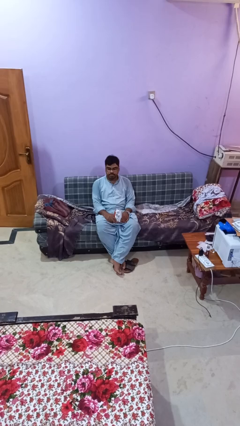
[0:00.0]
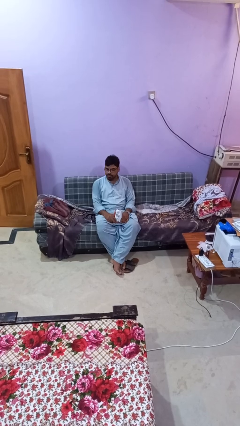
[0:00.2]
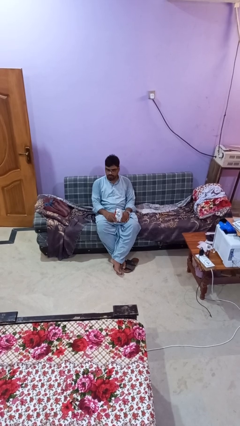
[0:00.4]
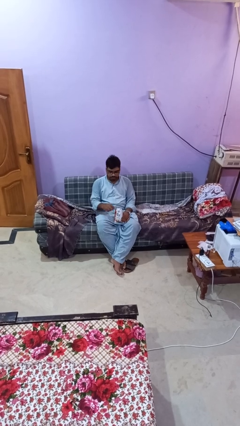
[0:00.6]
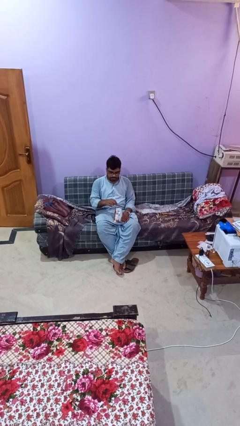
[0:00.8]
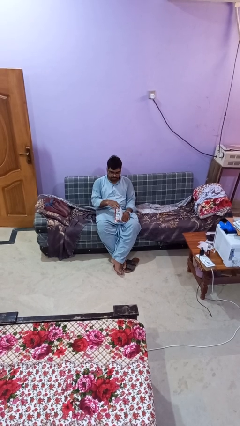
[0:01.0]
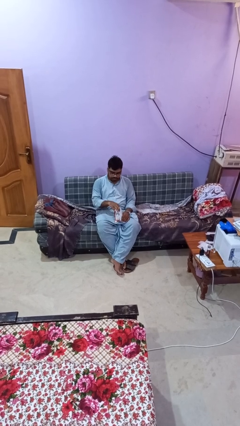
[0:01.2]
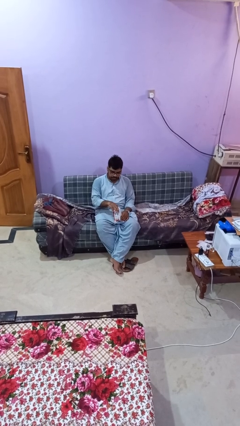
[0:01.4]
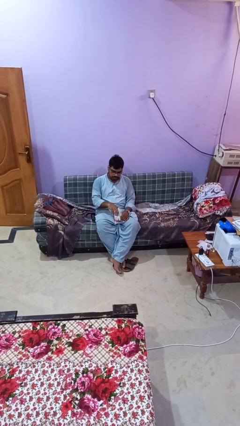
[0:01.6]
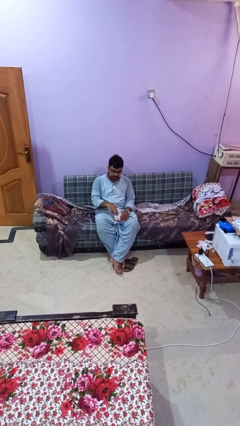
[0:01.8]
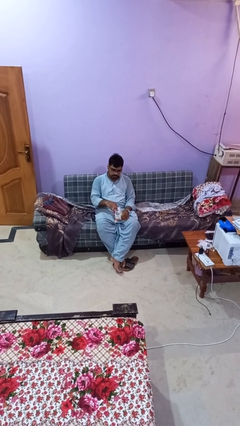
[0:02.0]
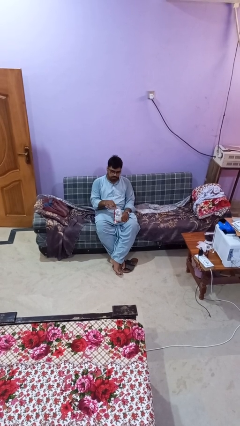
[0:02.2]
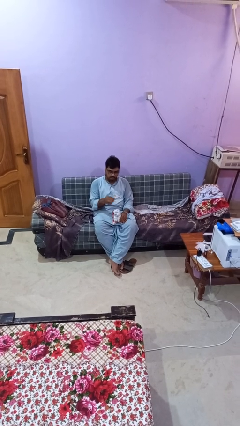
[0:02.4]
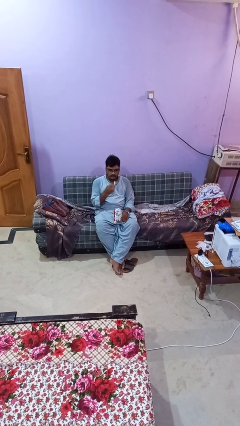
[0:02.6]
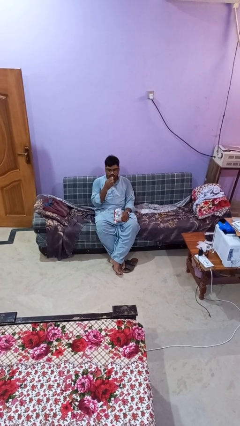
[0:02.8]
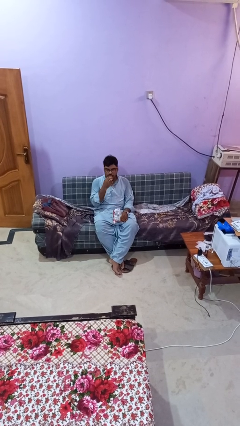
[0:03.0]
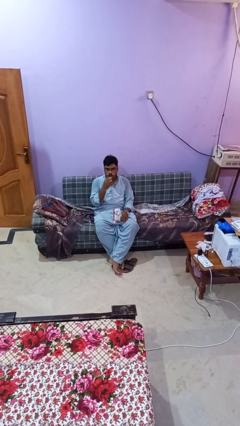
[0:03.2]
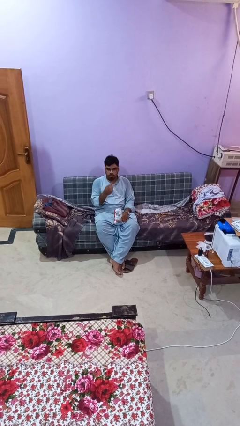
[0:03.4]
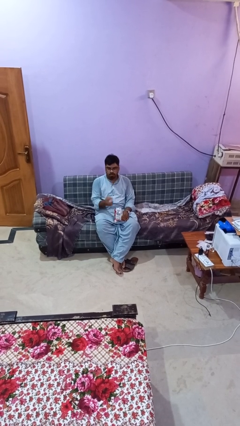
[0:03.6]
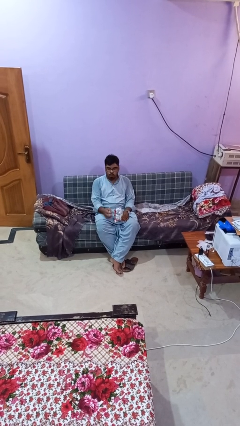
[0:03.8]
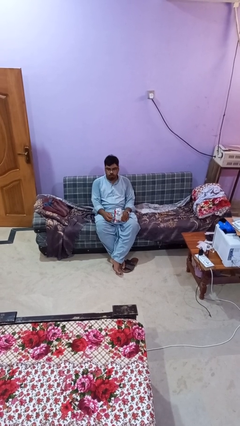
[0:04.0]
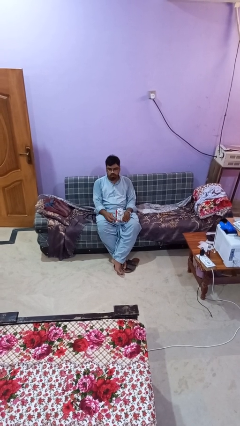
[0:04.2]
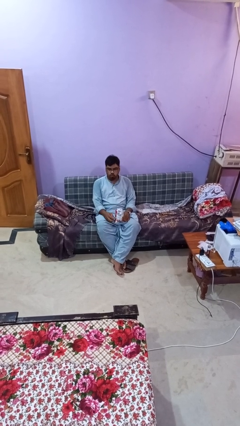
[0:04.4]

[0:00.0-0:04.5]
person eats snack from bag

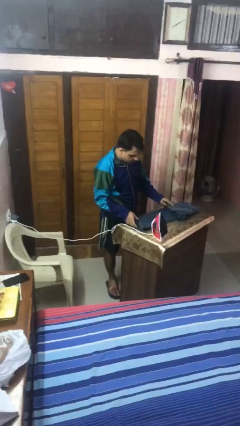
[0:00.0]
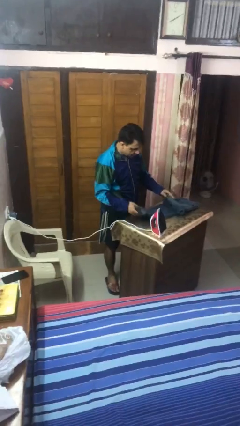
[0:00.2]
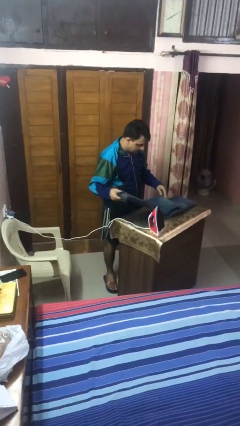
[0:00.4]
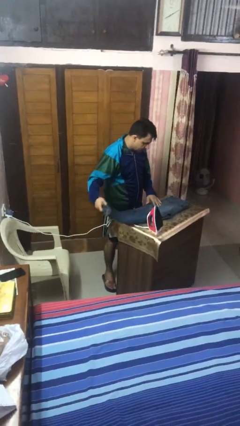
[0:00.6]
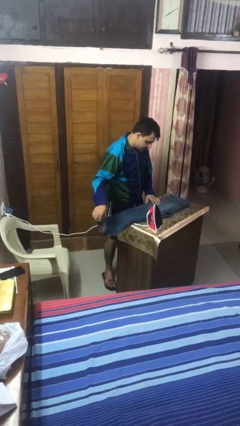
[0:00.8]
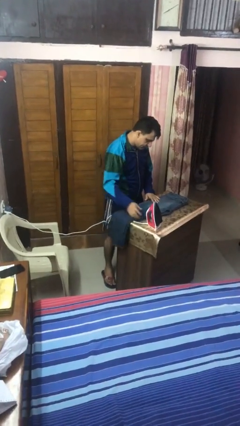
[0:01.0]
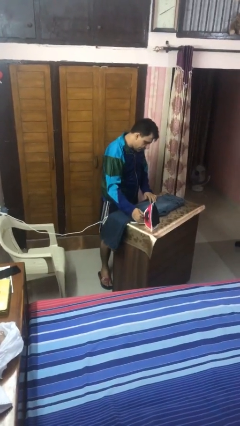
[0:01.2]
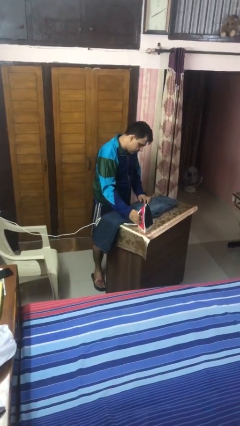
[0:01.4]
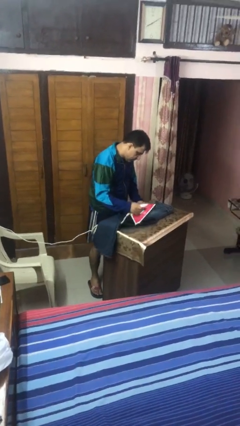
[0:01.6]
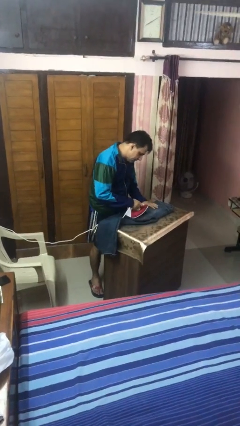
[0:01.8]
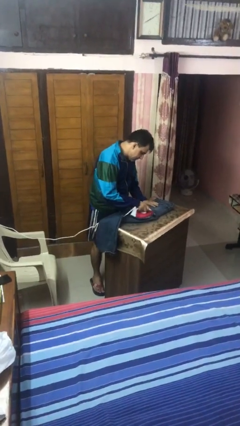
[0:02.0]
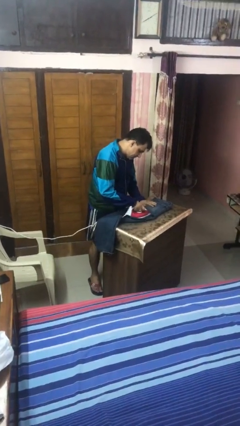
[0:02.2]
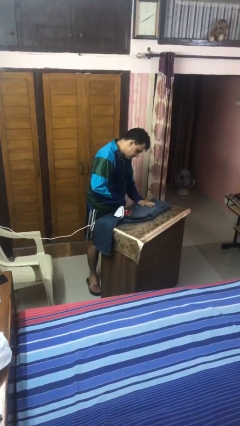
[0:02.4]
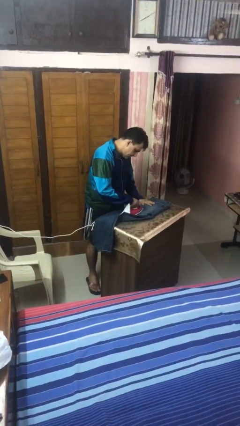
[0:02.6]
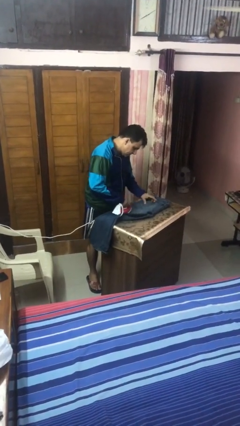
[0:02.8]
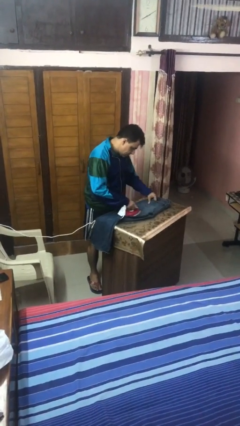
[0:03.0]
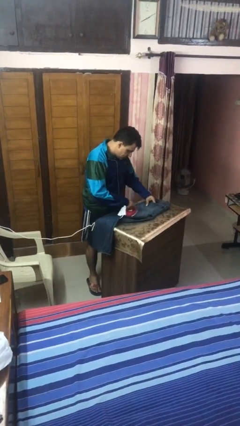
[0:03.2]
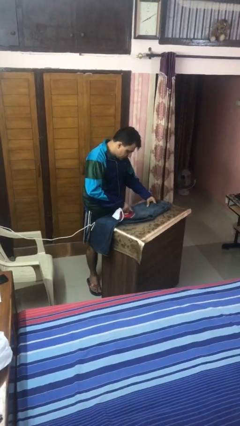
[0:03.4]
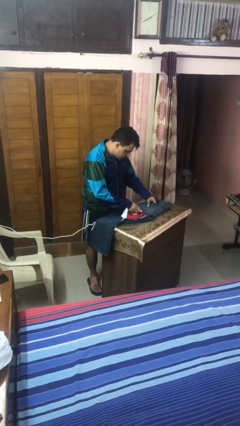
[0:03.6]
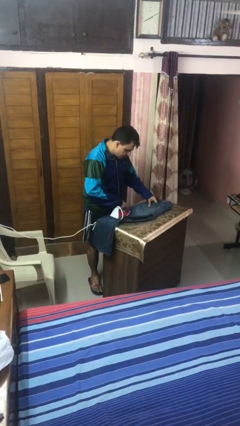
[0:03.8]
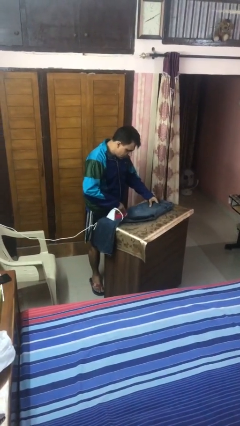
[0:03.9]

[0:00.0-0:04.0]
person irons clothes

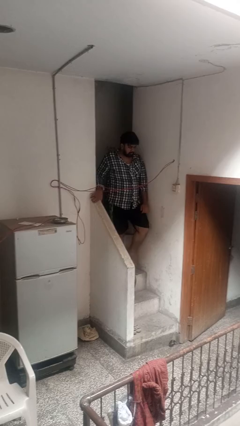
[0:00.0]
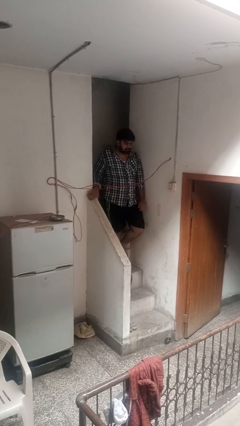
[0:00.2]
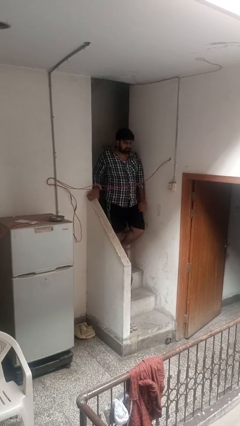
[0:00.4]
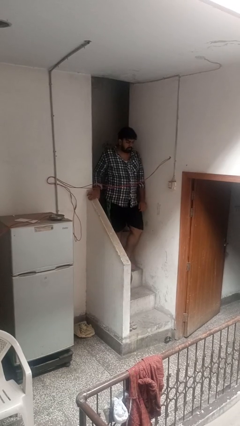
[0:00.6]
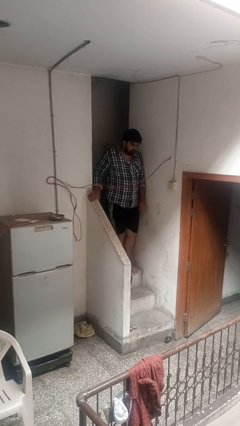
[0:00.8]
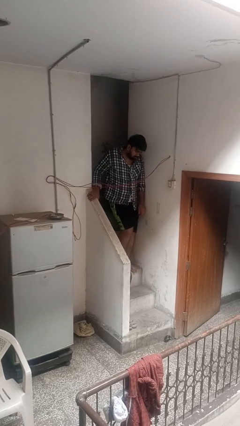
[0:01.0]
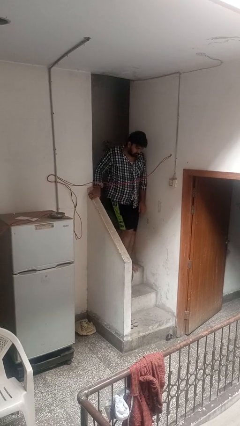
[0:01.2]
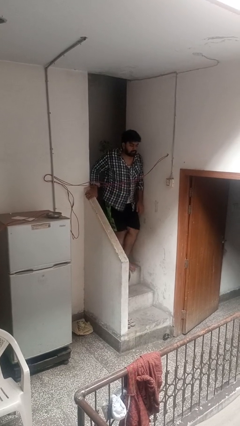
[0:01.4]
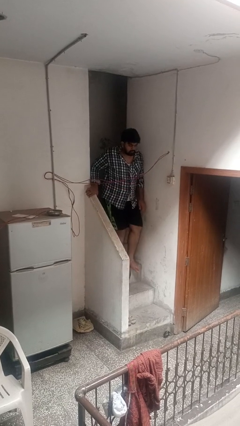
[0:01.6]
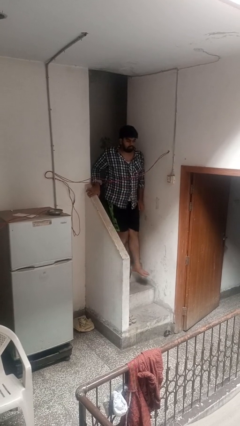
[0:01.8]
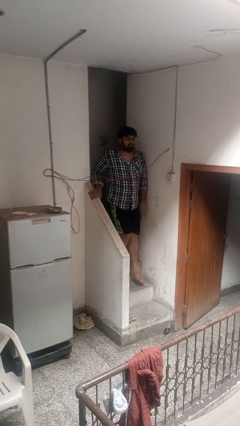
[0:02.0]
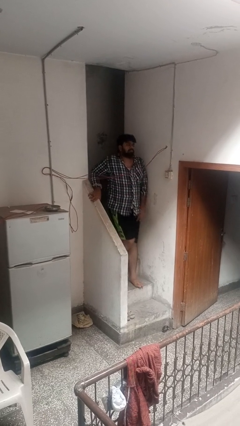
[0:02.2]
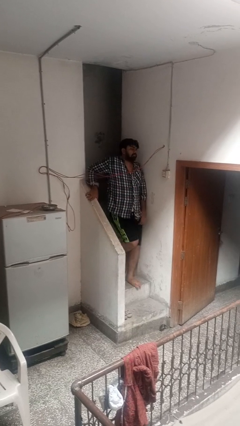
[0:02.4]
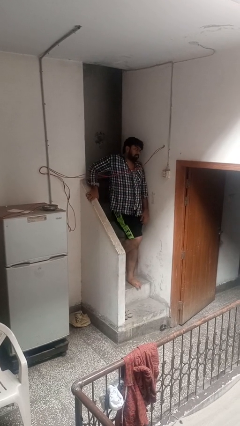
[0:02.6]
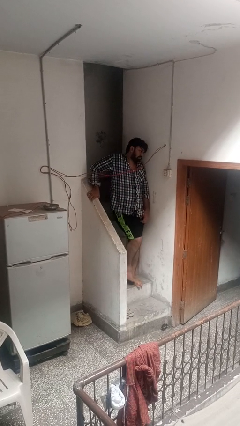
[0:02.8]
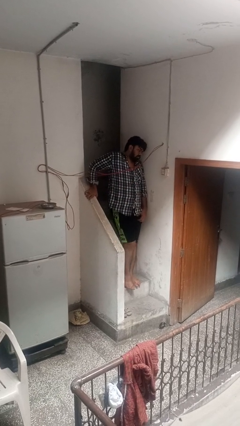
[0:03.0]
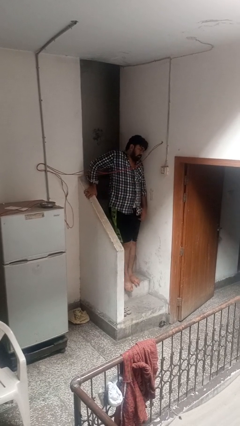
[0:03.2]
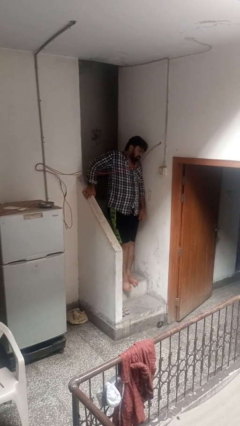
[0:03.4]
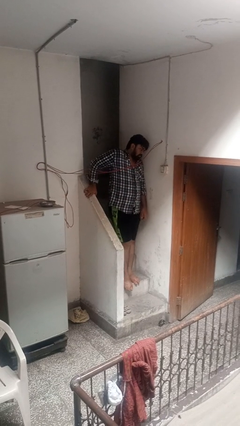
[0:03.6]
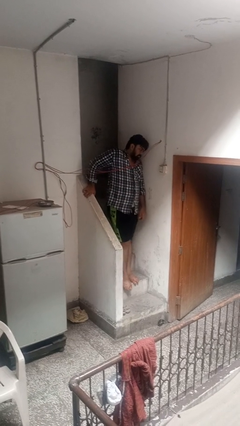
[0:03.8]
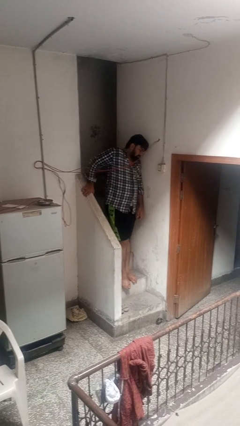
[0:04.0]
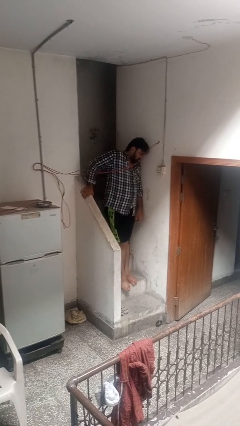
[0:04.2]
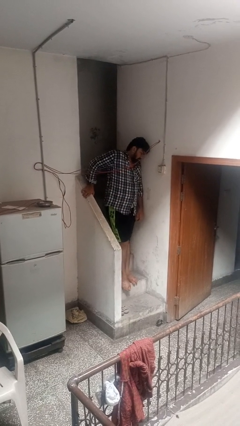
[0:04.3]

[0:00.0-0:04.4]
person climbs down stairs

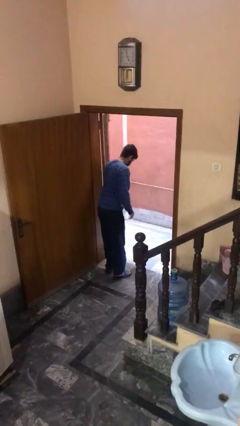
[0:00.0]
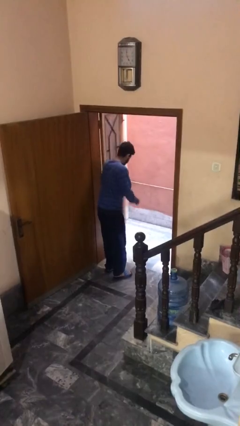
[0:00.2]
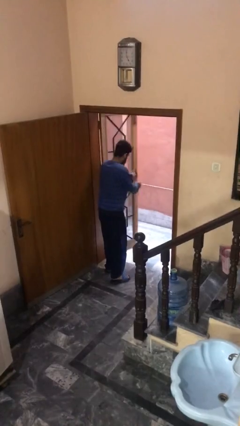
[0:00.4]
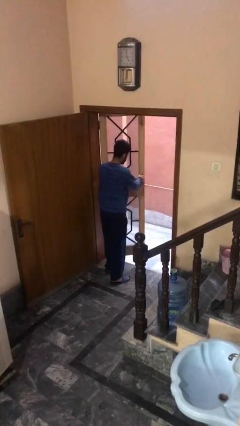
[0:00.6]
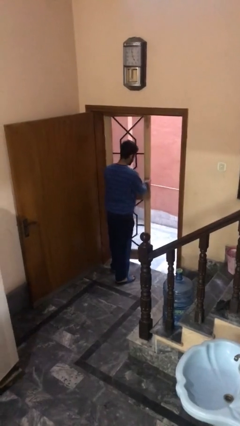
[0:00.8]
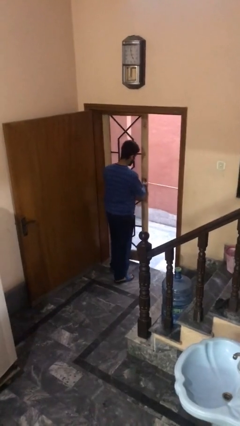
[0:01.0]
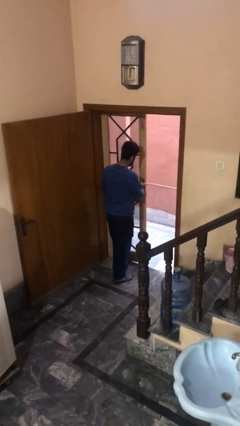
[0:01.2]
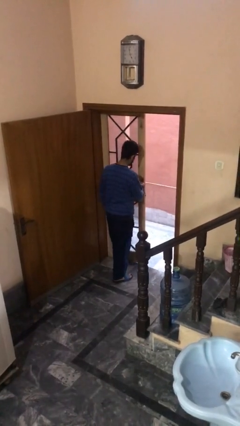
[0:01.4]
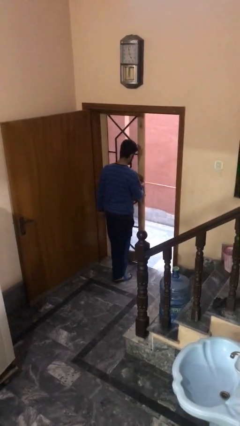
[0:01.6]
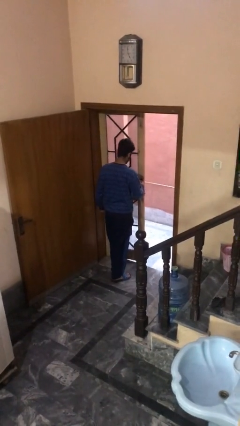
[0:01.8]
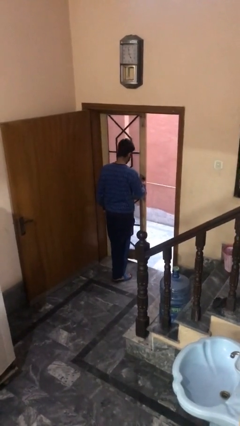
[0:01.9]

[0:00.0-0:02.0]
person closes facility door

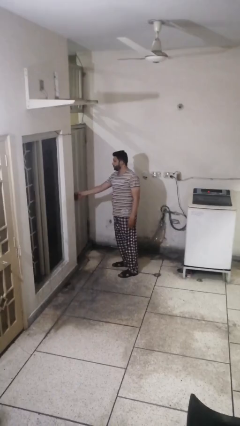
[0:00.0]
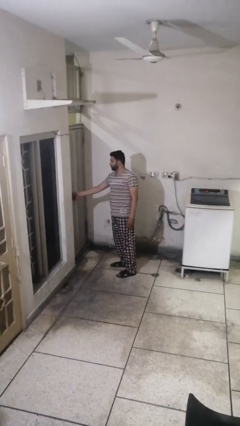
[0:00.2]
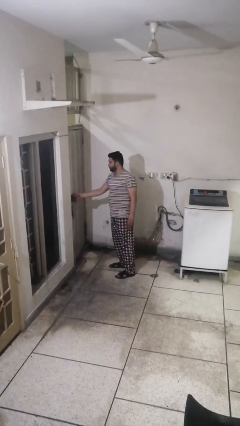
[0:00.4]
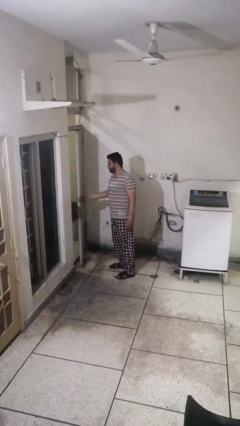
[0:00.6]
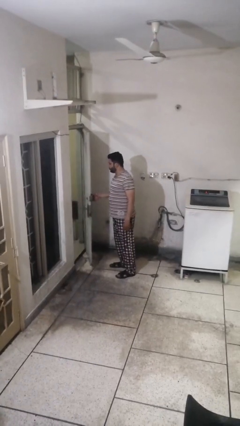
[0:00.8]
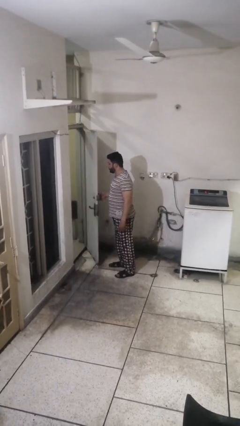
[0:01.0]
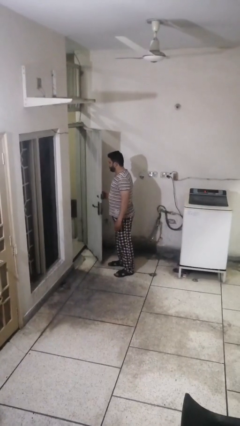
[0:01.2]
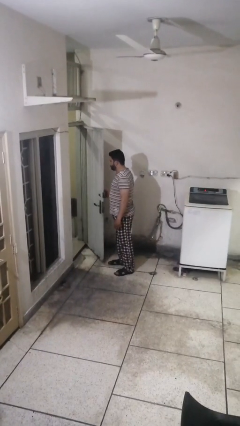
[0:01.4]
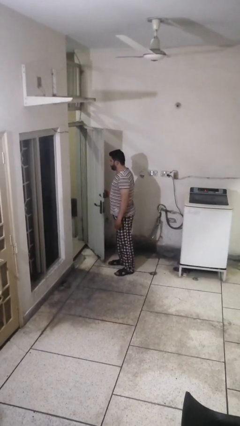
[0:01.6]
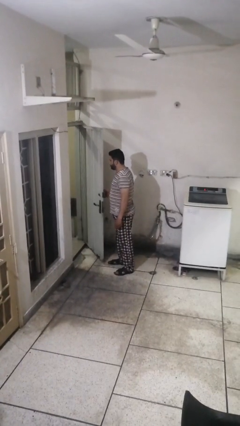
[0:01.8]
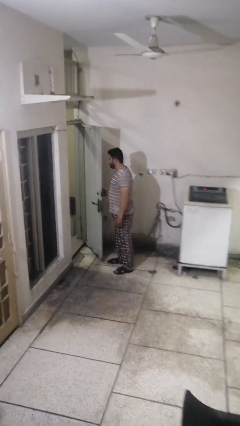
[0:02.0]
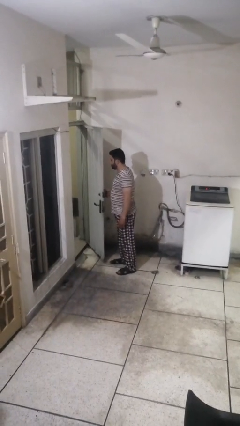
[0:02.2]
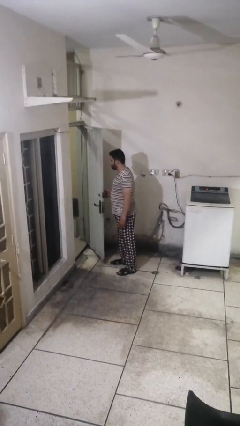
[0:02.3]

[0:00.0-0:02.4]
person opens facility door
